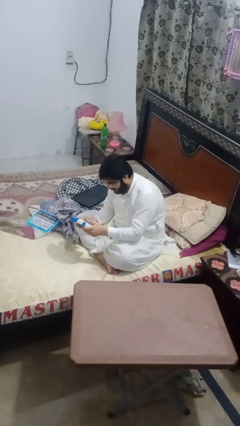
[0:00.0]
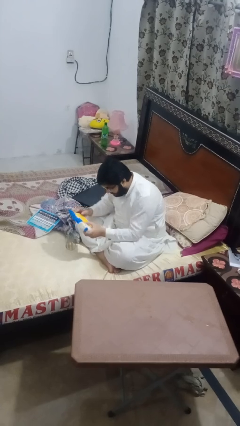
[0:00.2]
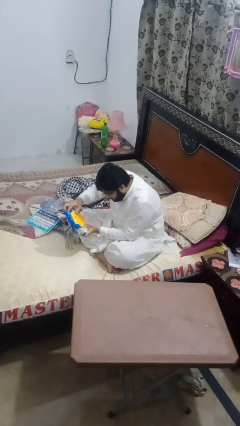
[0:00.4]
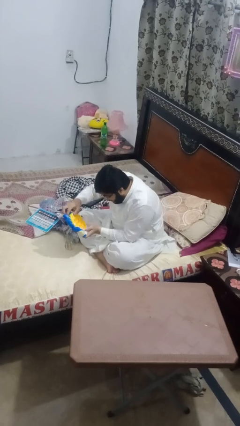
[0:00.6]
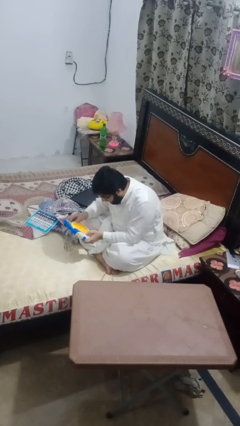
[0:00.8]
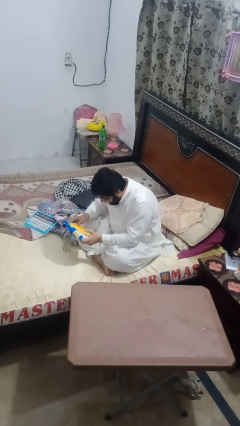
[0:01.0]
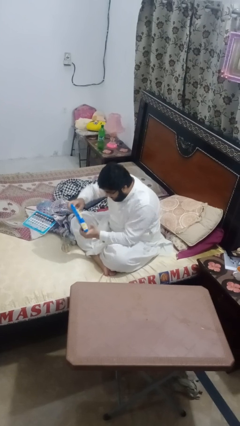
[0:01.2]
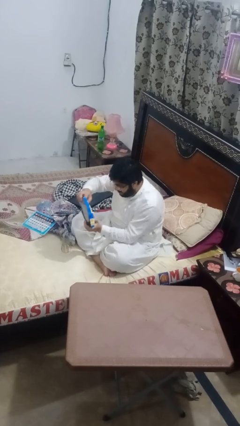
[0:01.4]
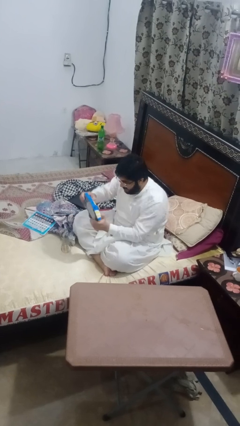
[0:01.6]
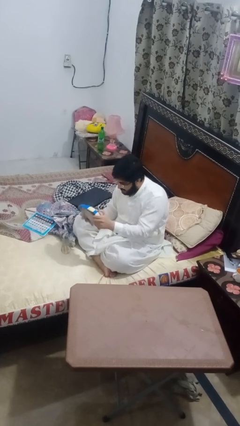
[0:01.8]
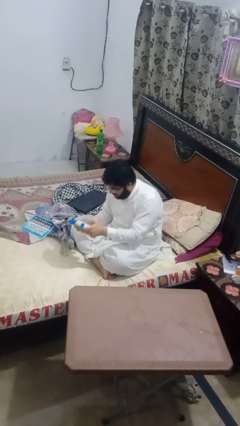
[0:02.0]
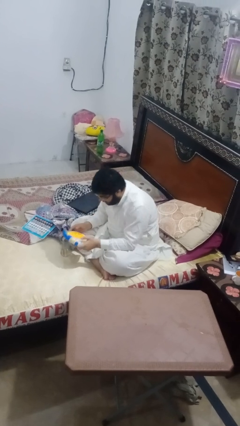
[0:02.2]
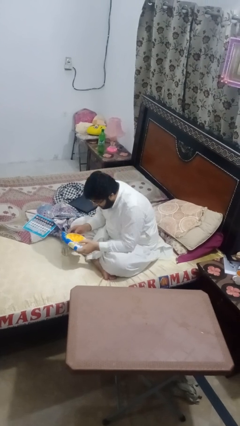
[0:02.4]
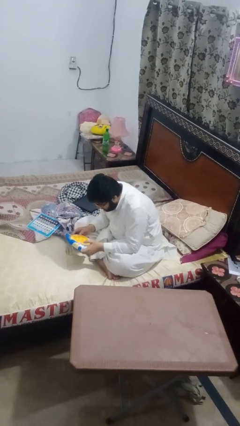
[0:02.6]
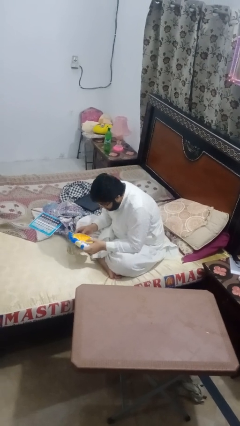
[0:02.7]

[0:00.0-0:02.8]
person interacts with handheld game

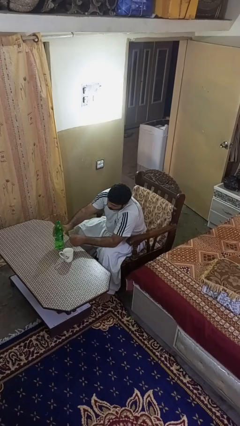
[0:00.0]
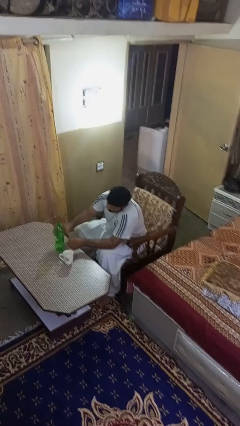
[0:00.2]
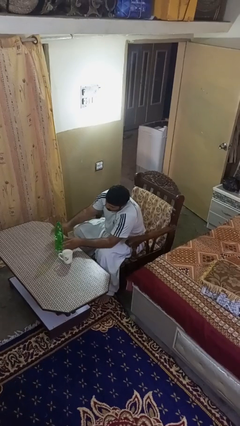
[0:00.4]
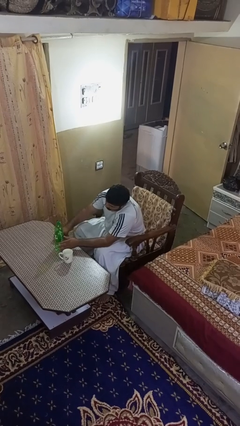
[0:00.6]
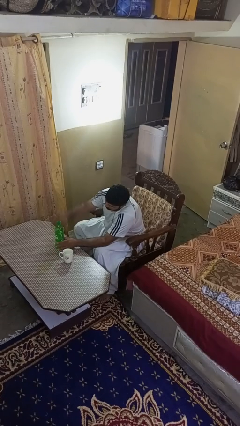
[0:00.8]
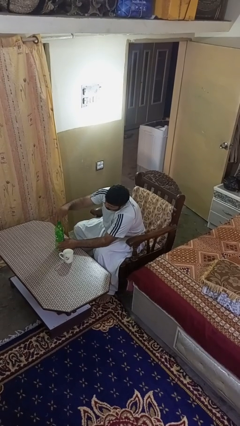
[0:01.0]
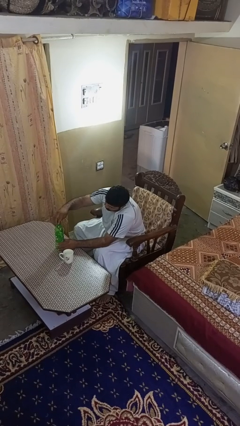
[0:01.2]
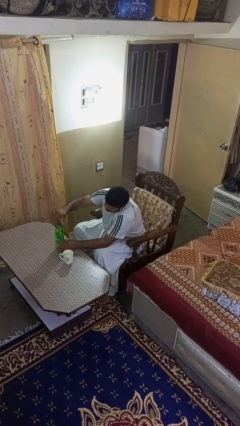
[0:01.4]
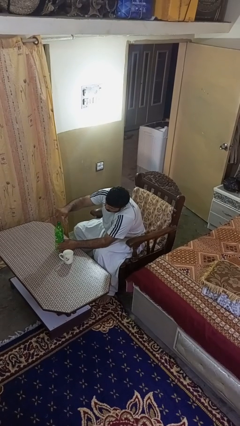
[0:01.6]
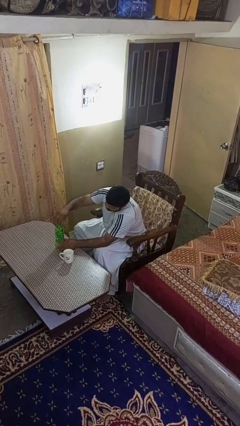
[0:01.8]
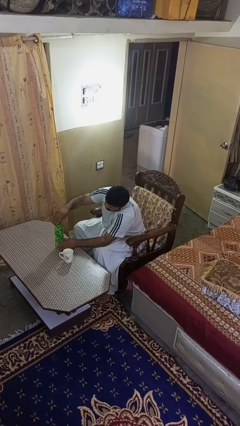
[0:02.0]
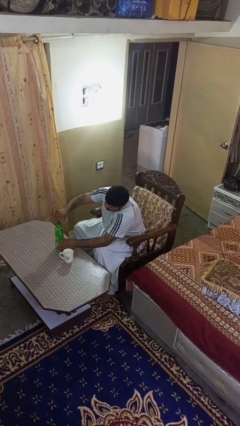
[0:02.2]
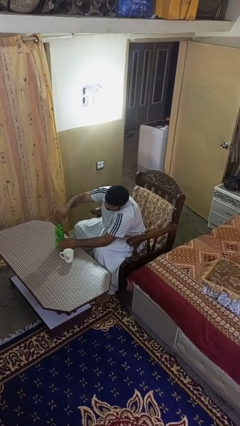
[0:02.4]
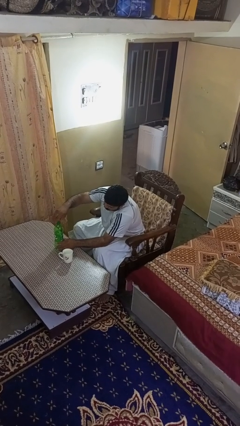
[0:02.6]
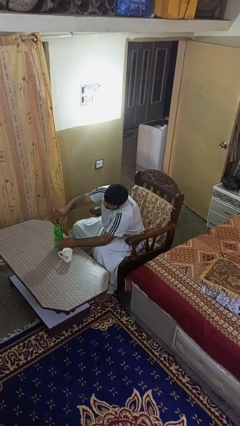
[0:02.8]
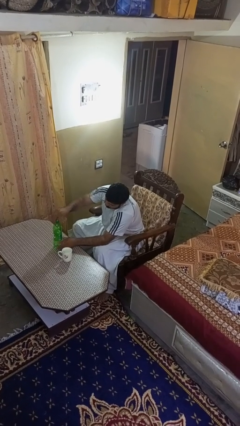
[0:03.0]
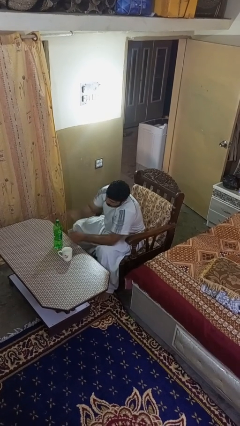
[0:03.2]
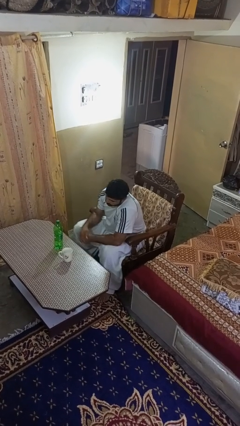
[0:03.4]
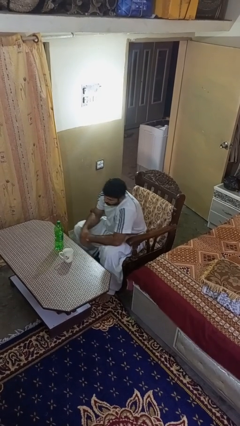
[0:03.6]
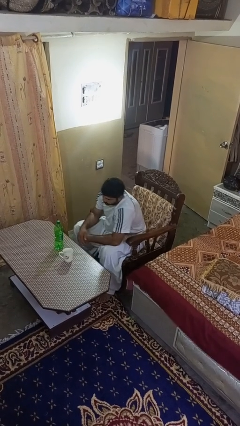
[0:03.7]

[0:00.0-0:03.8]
person screws lid to bottle

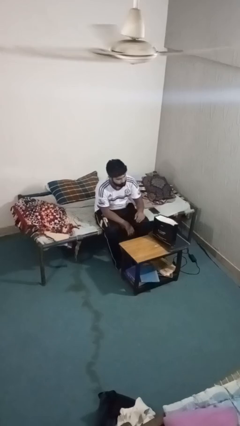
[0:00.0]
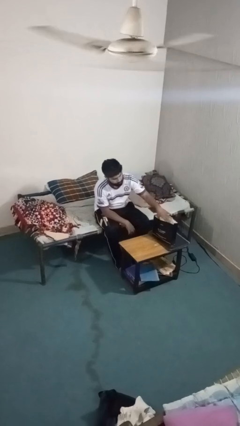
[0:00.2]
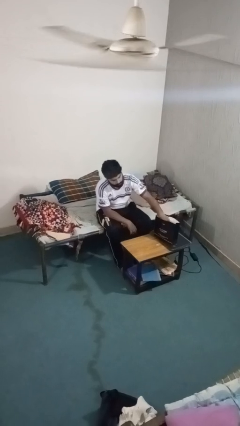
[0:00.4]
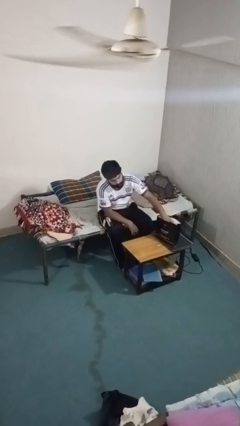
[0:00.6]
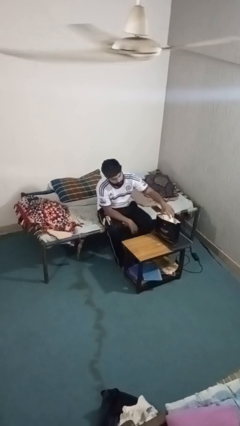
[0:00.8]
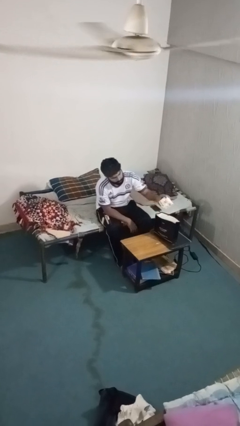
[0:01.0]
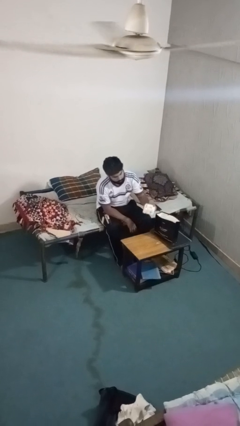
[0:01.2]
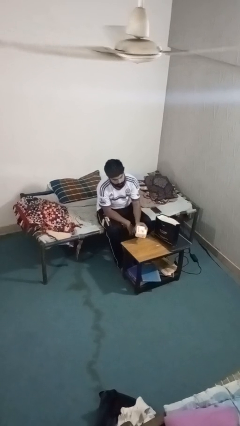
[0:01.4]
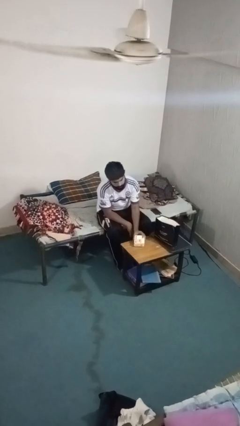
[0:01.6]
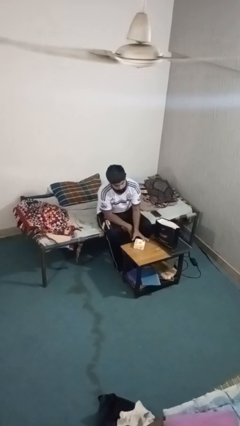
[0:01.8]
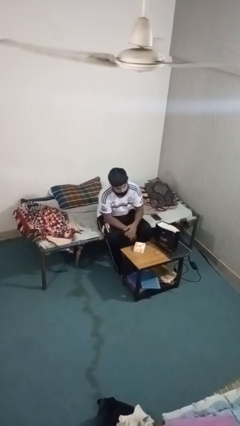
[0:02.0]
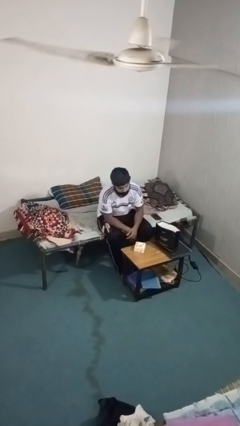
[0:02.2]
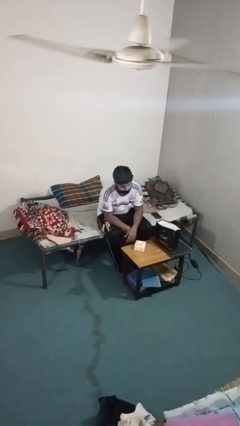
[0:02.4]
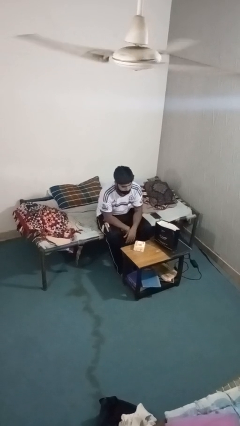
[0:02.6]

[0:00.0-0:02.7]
person takes object from bag

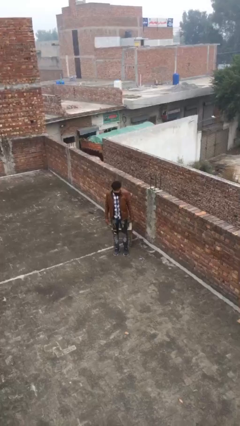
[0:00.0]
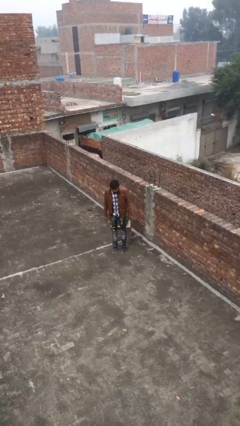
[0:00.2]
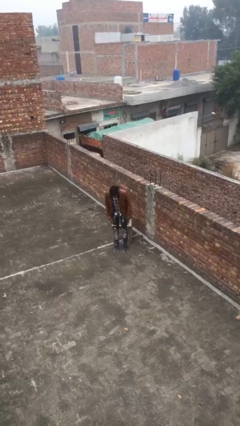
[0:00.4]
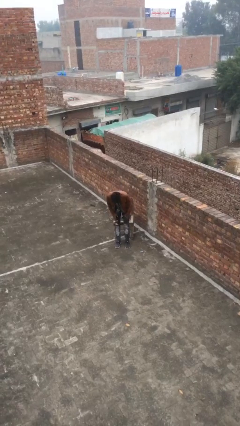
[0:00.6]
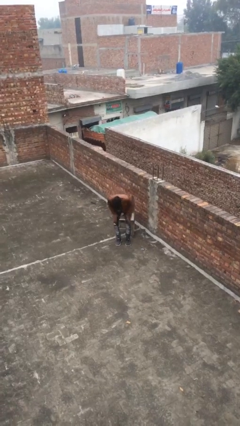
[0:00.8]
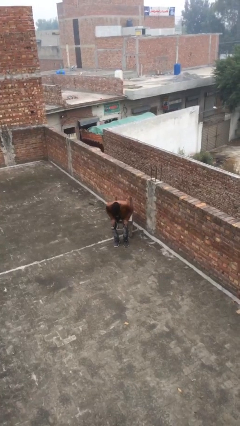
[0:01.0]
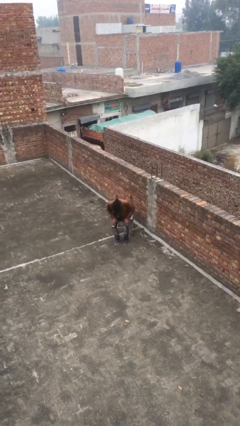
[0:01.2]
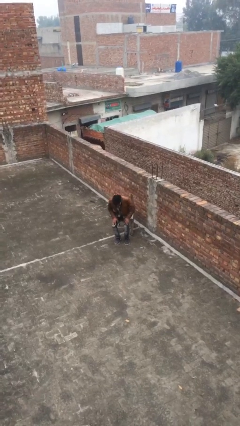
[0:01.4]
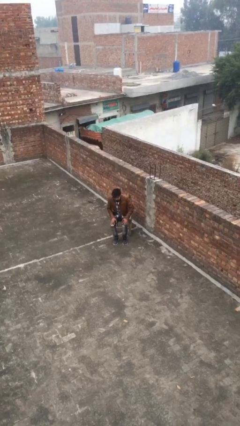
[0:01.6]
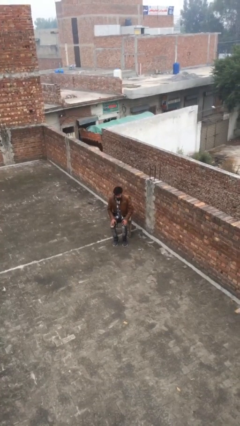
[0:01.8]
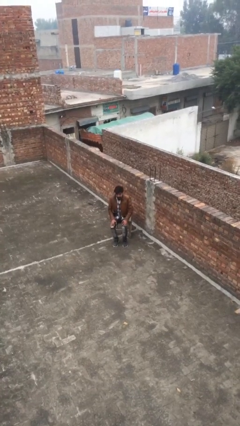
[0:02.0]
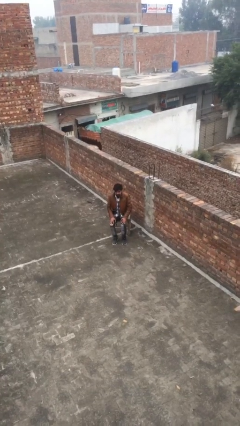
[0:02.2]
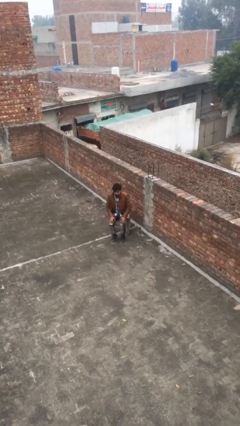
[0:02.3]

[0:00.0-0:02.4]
person sits down

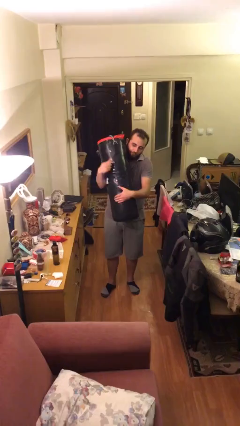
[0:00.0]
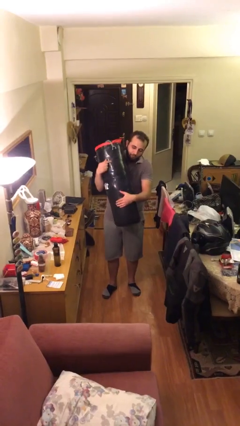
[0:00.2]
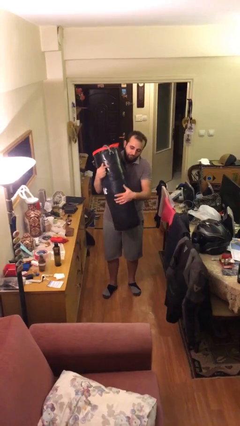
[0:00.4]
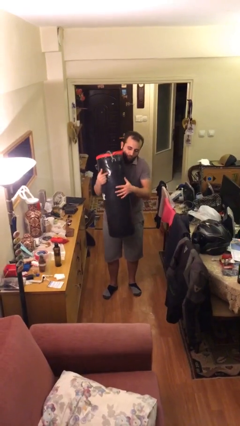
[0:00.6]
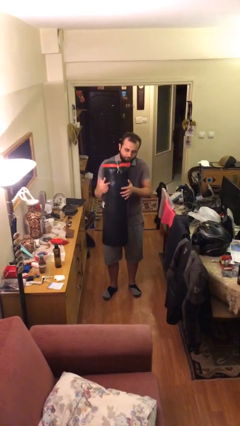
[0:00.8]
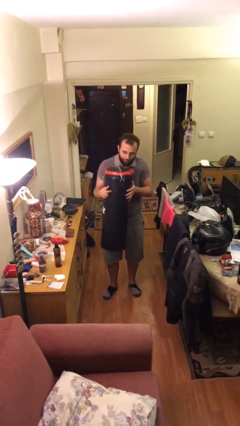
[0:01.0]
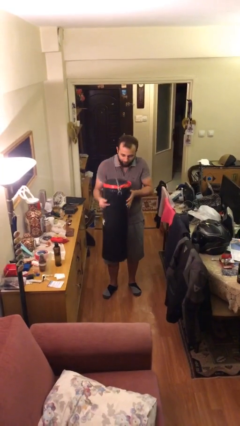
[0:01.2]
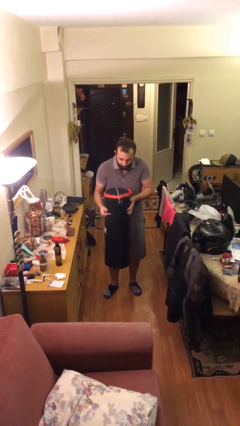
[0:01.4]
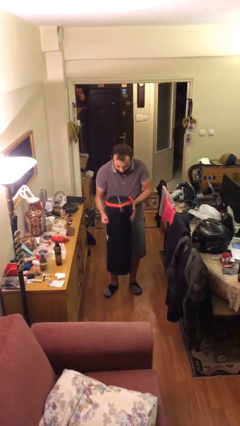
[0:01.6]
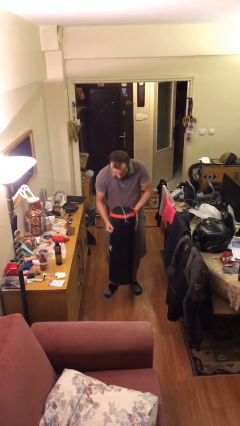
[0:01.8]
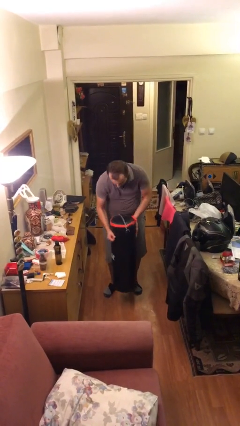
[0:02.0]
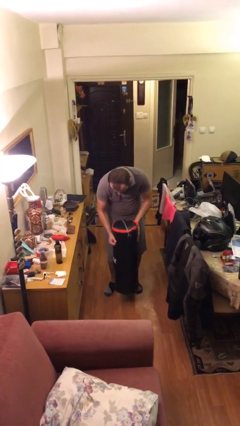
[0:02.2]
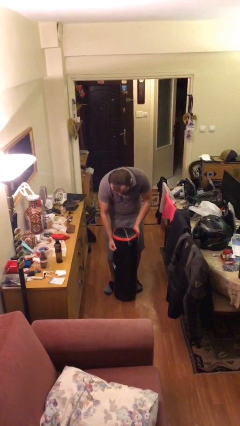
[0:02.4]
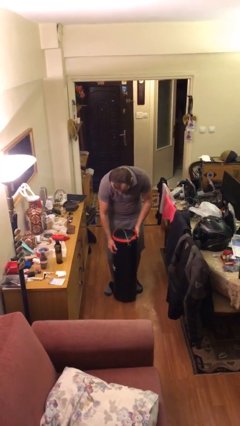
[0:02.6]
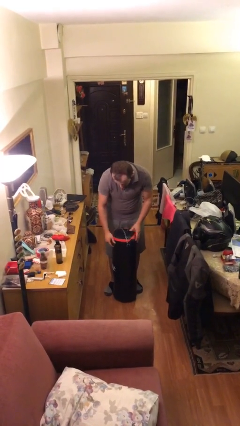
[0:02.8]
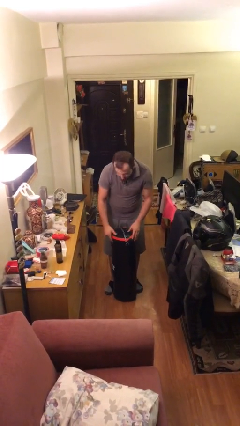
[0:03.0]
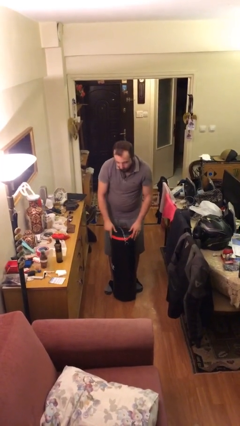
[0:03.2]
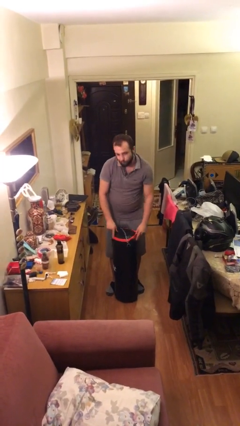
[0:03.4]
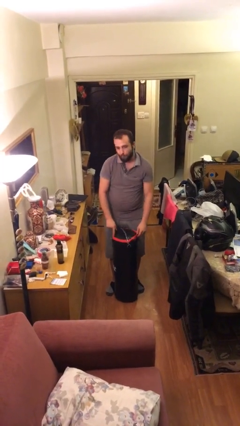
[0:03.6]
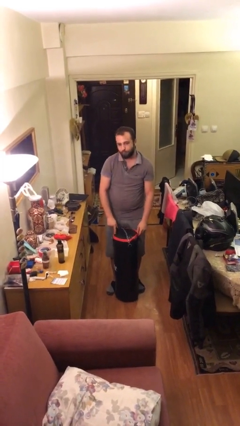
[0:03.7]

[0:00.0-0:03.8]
person puts down object on floor

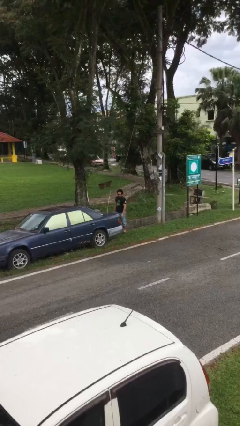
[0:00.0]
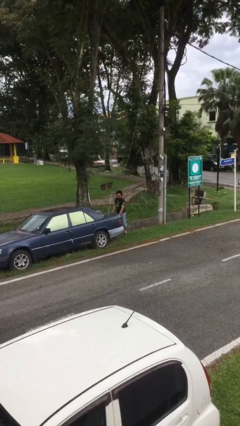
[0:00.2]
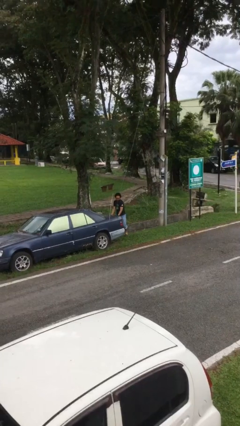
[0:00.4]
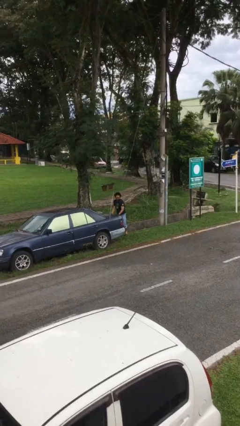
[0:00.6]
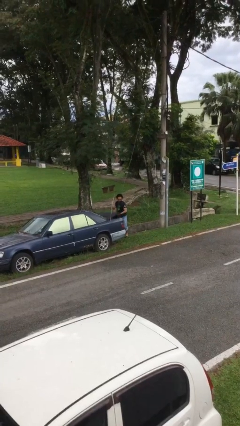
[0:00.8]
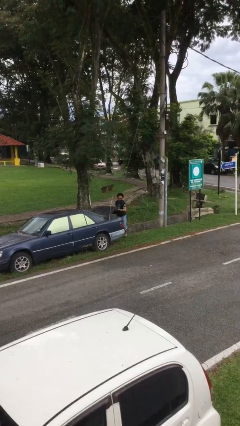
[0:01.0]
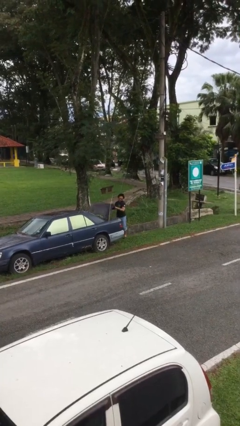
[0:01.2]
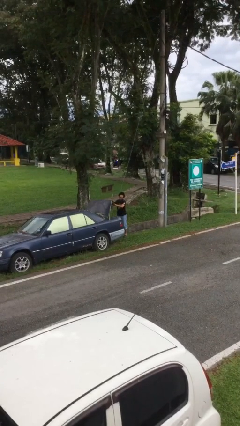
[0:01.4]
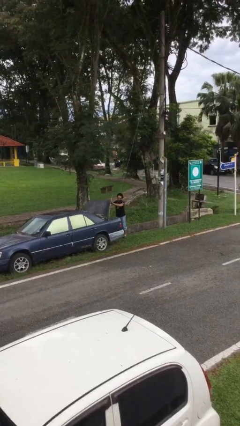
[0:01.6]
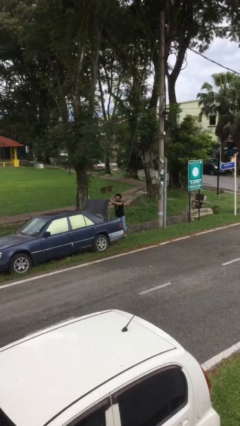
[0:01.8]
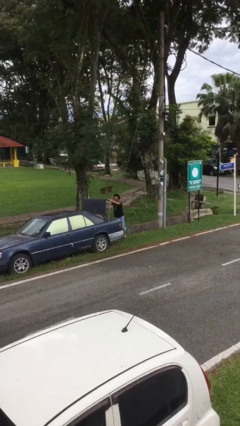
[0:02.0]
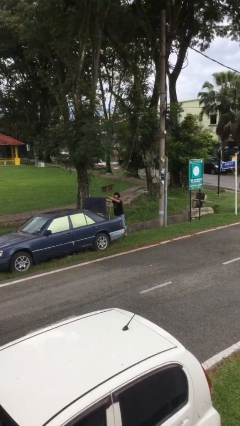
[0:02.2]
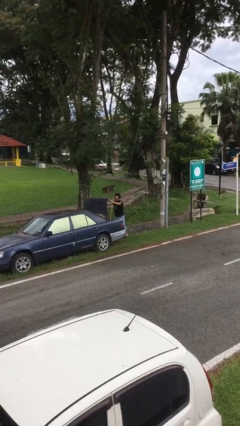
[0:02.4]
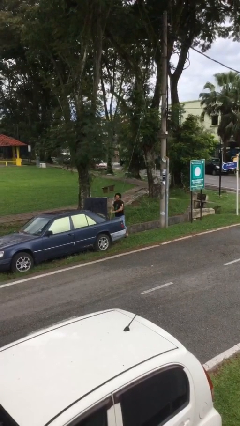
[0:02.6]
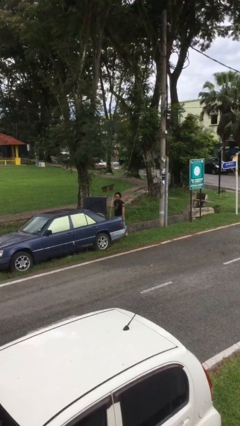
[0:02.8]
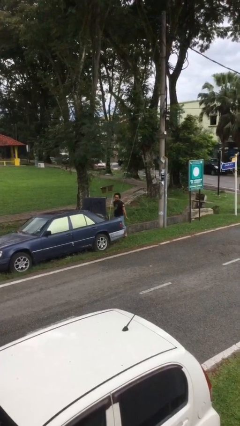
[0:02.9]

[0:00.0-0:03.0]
person opens car trunk
